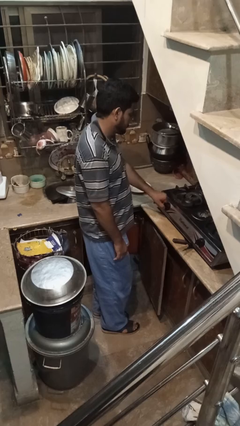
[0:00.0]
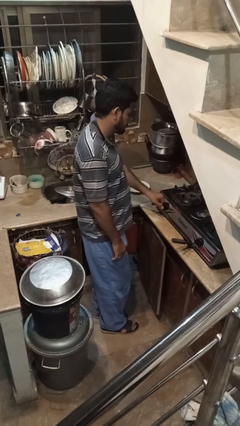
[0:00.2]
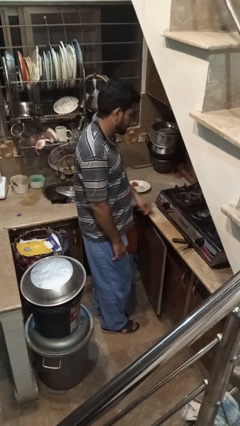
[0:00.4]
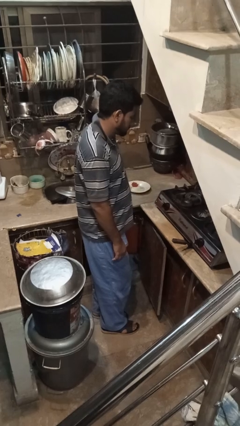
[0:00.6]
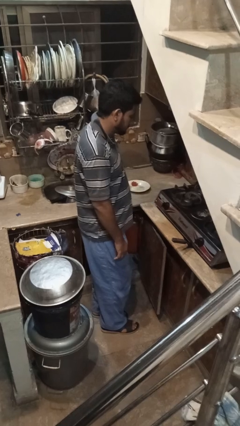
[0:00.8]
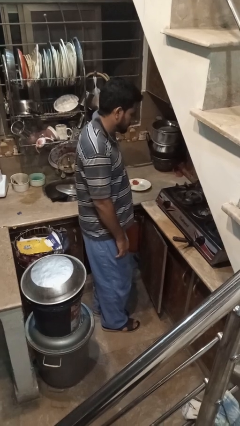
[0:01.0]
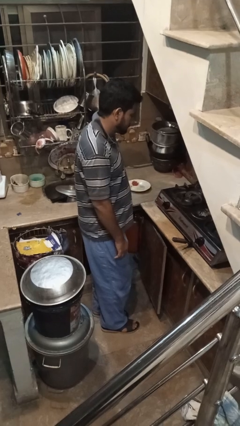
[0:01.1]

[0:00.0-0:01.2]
person turns off stovetop

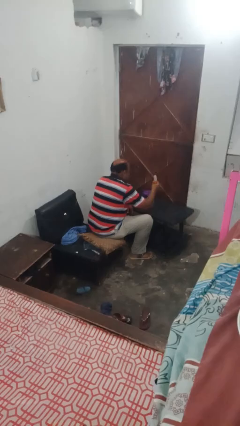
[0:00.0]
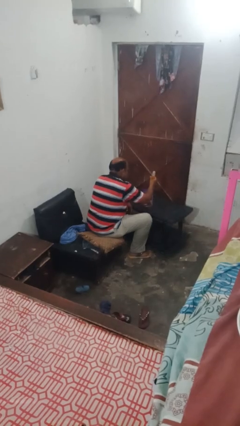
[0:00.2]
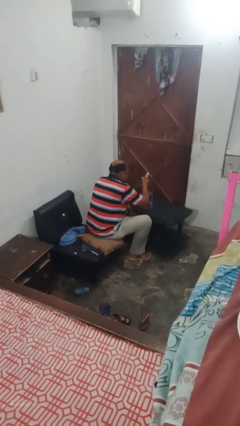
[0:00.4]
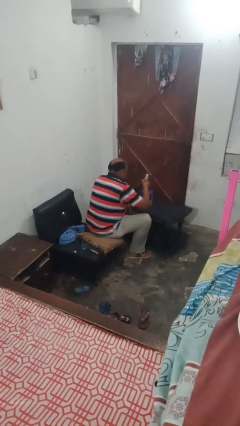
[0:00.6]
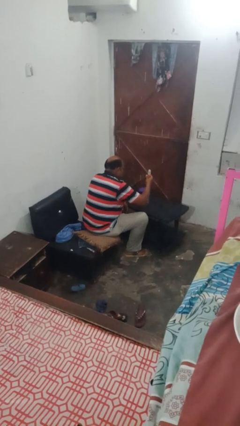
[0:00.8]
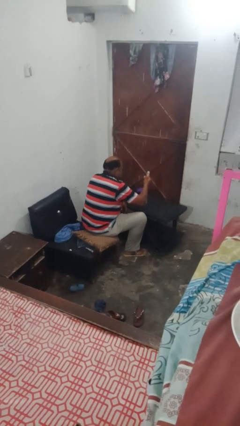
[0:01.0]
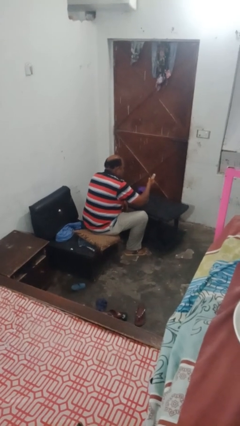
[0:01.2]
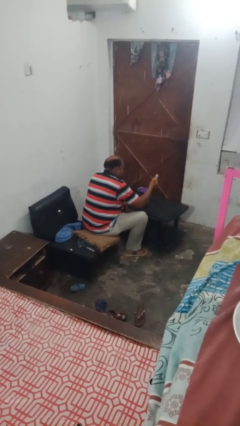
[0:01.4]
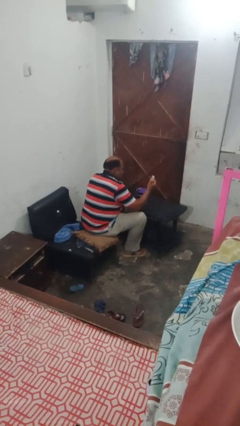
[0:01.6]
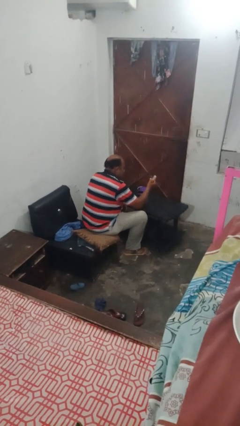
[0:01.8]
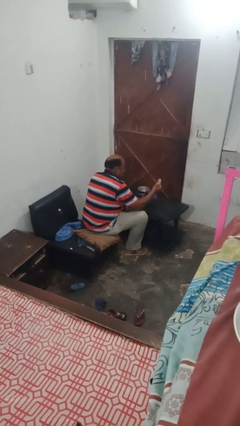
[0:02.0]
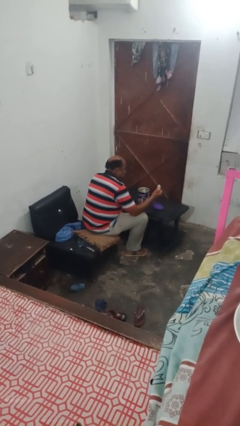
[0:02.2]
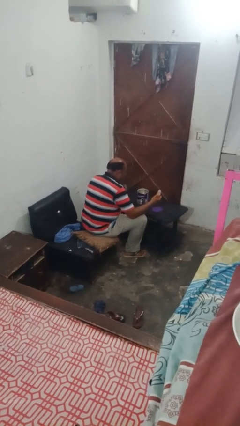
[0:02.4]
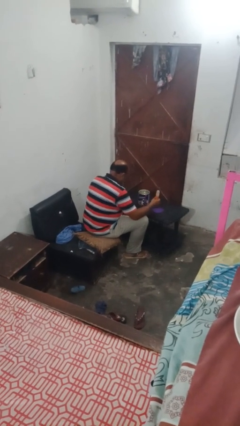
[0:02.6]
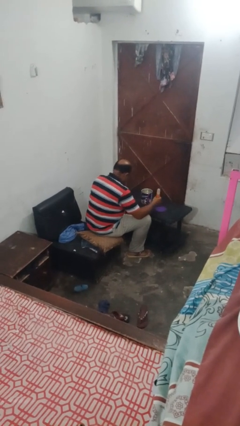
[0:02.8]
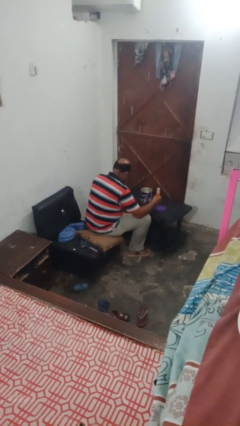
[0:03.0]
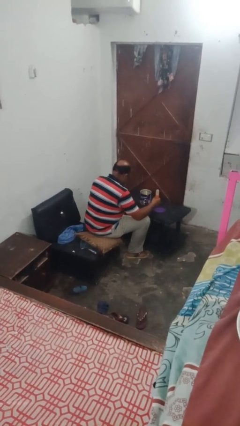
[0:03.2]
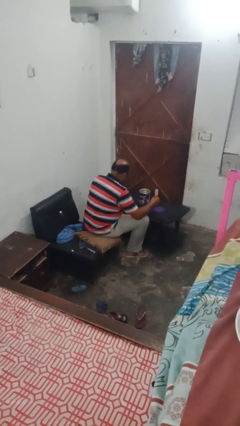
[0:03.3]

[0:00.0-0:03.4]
person opens can with can opener

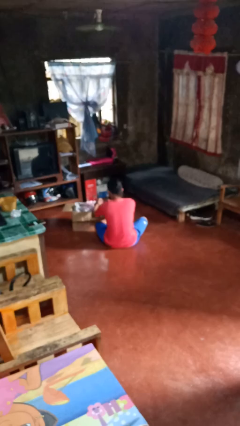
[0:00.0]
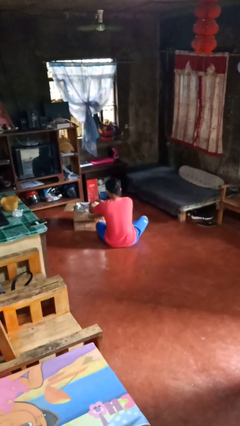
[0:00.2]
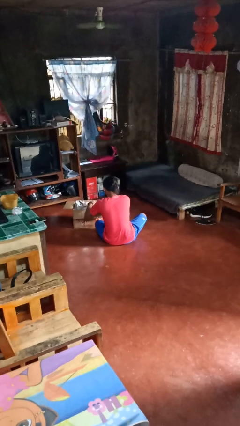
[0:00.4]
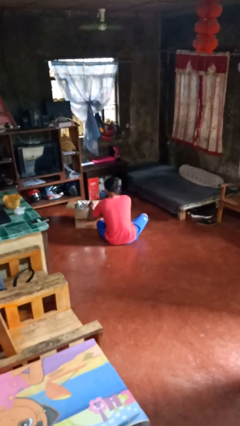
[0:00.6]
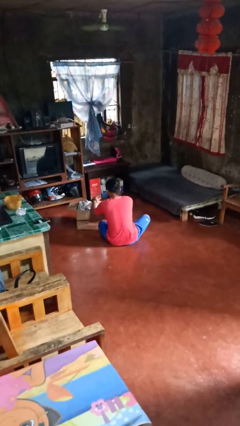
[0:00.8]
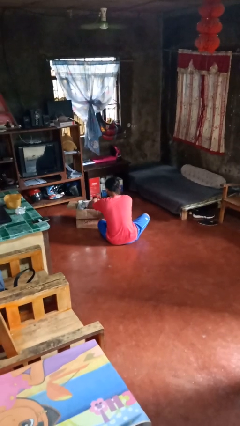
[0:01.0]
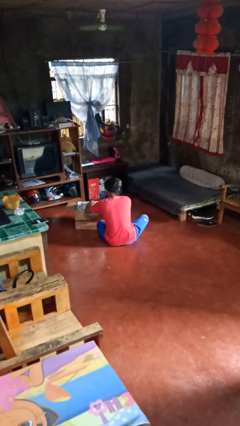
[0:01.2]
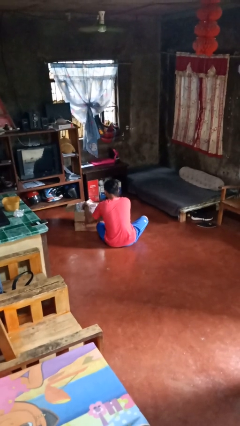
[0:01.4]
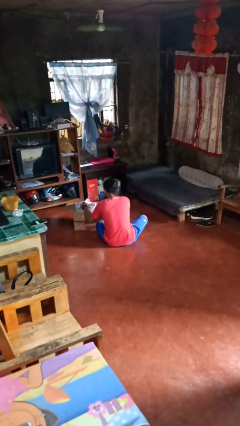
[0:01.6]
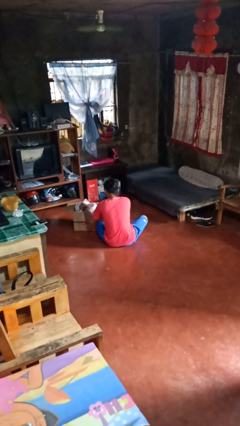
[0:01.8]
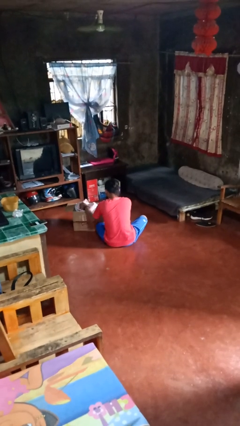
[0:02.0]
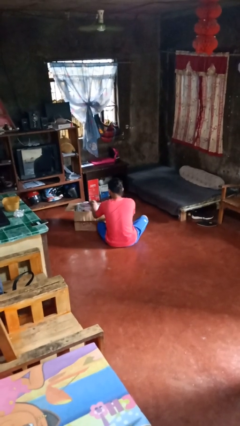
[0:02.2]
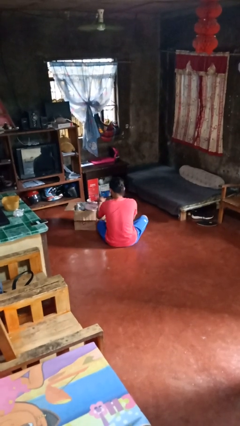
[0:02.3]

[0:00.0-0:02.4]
person searches in box

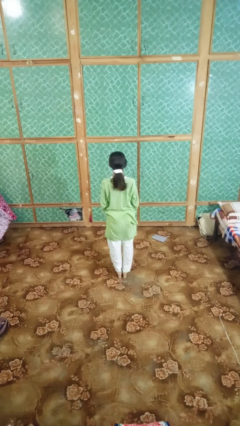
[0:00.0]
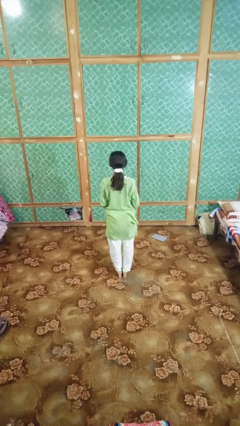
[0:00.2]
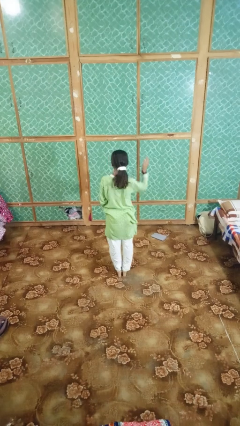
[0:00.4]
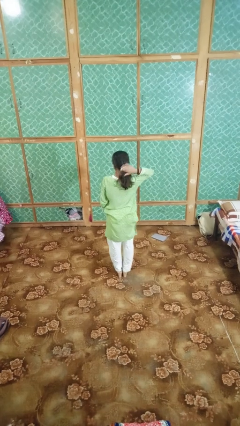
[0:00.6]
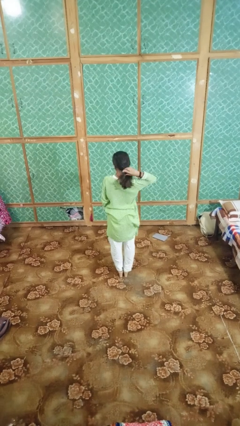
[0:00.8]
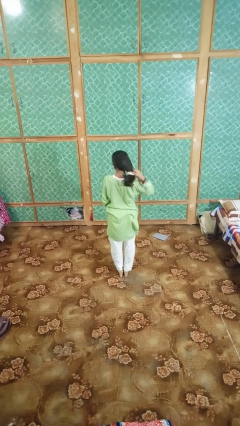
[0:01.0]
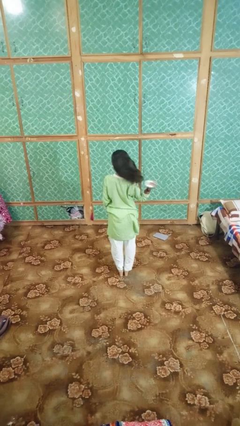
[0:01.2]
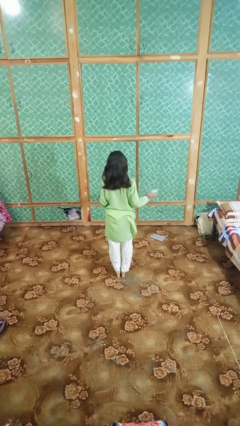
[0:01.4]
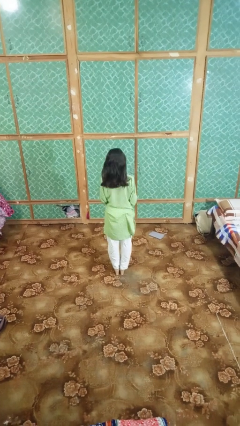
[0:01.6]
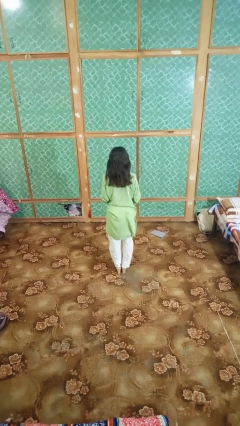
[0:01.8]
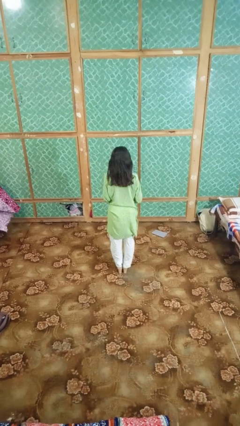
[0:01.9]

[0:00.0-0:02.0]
person takes off hairtie

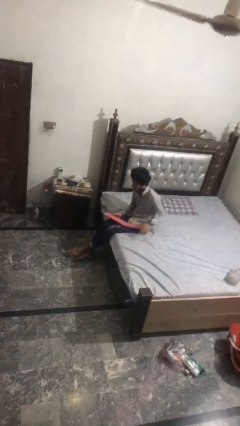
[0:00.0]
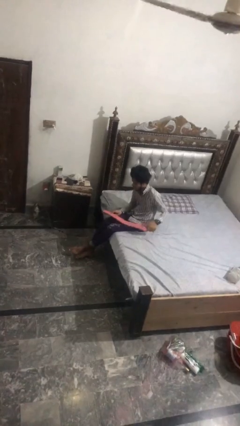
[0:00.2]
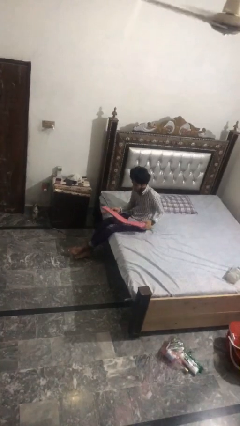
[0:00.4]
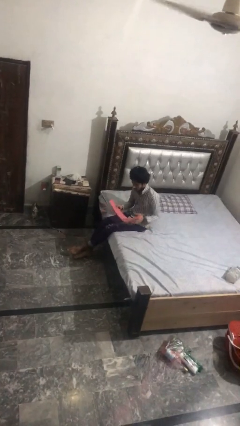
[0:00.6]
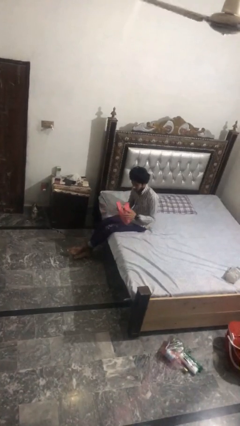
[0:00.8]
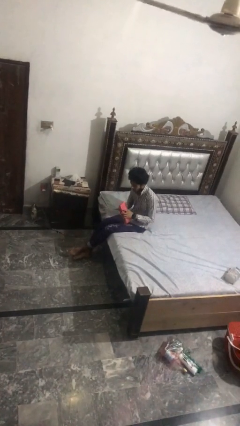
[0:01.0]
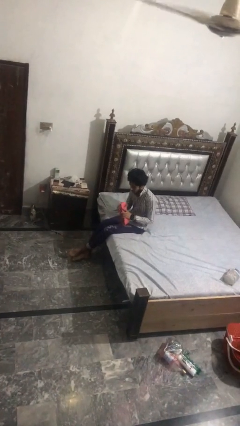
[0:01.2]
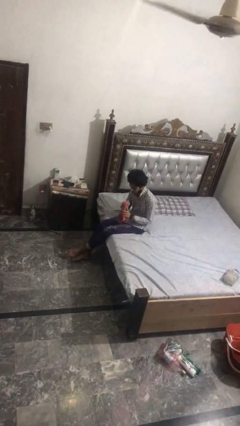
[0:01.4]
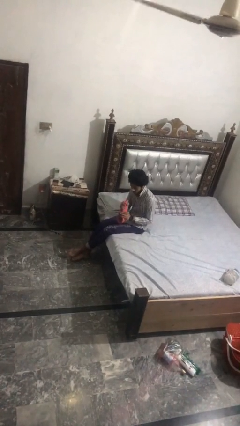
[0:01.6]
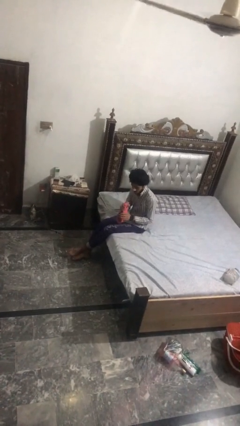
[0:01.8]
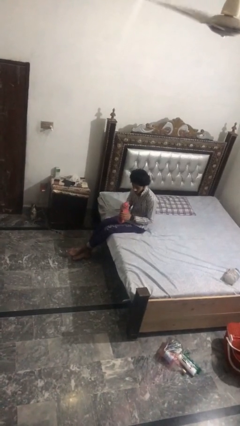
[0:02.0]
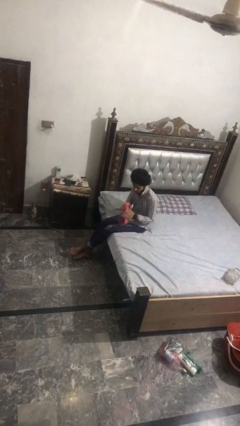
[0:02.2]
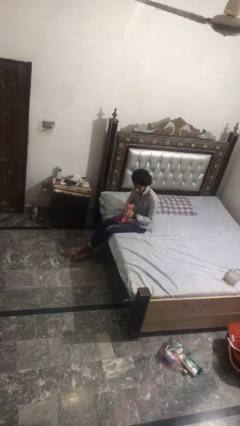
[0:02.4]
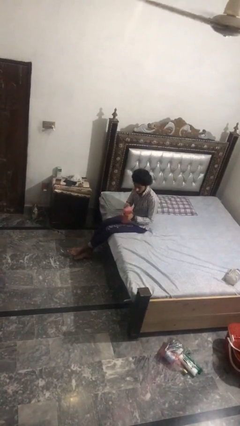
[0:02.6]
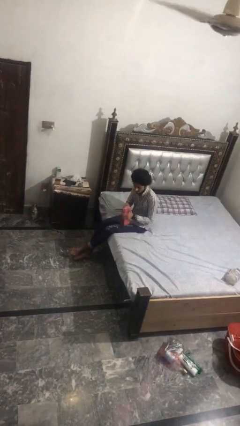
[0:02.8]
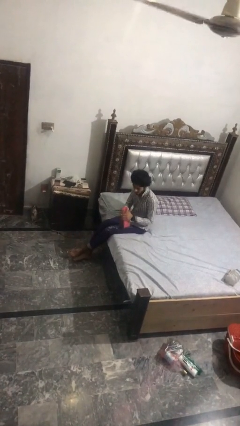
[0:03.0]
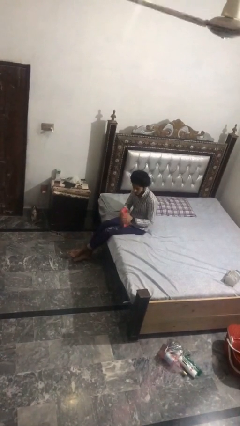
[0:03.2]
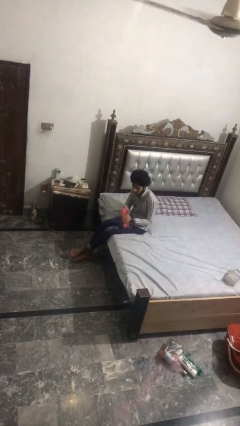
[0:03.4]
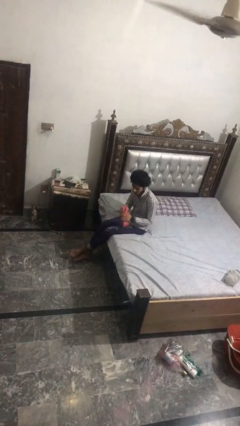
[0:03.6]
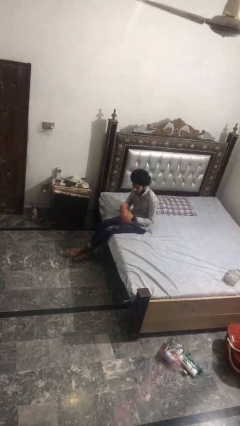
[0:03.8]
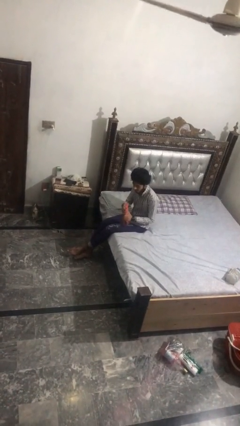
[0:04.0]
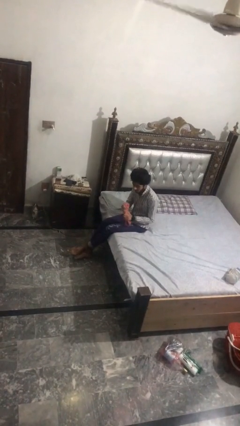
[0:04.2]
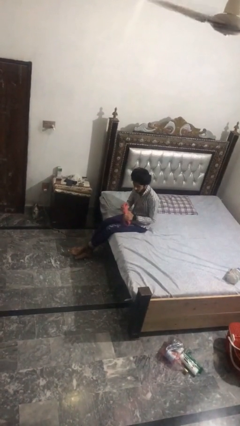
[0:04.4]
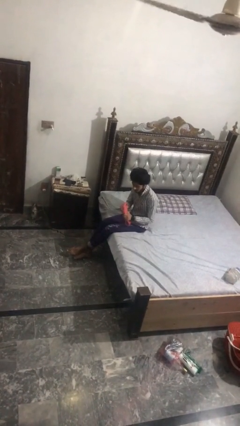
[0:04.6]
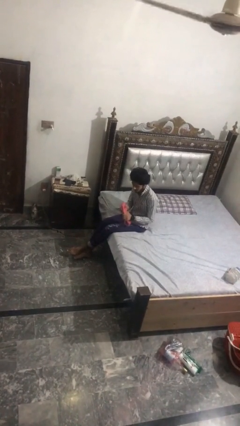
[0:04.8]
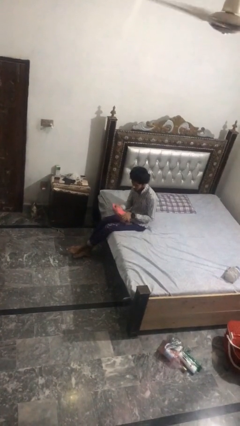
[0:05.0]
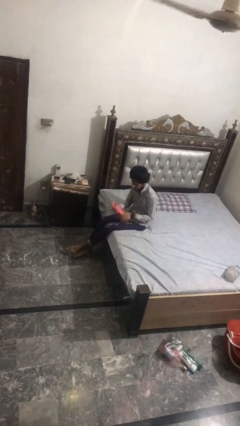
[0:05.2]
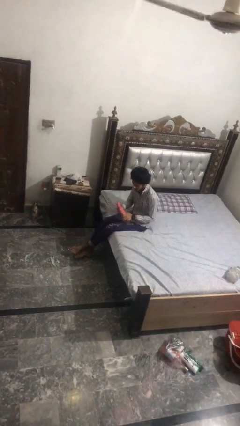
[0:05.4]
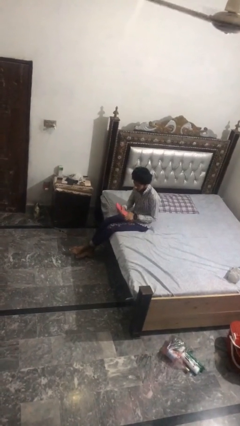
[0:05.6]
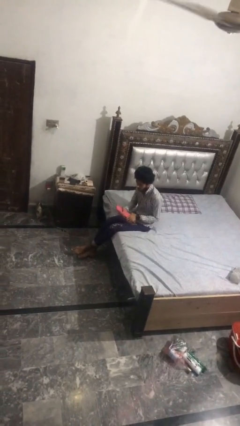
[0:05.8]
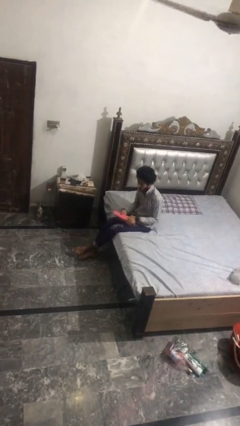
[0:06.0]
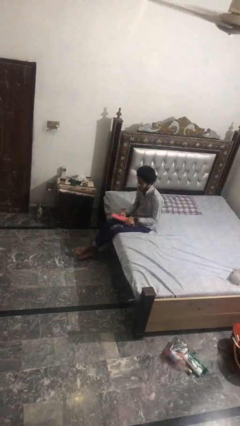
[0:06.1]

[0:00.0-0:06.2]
person squeezes object

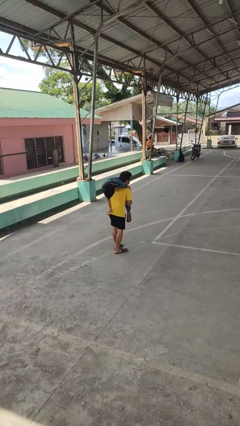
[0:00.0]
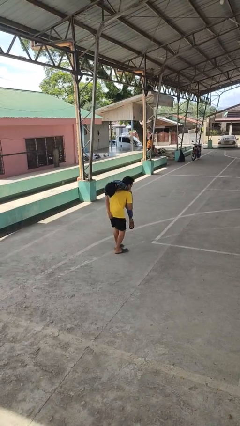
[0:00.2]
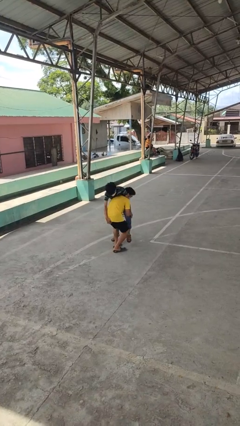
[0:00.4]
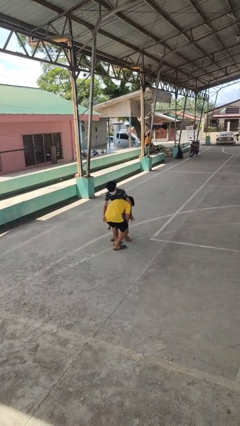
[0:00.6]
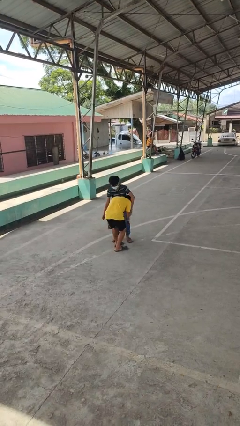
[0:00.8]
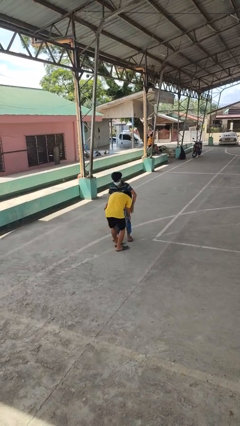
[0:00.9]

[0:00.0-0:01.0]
person puts down person

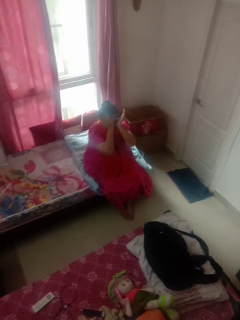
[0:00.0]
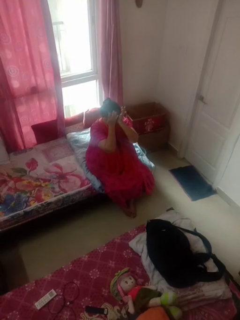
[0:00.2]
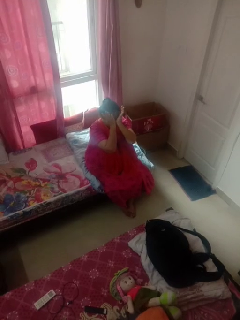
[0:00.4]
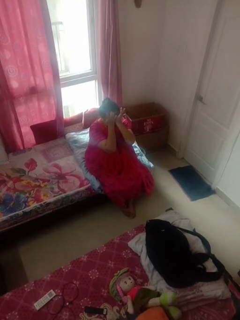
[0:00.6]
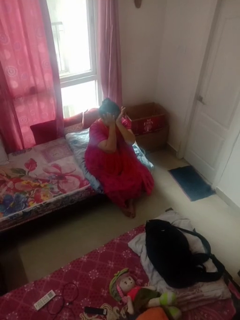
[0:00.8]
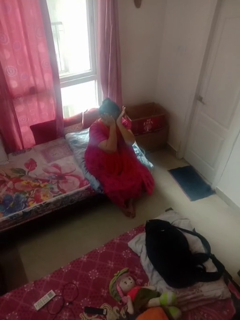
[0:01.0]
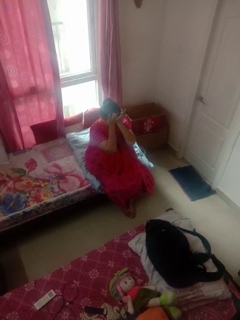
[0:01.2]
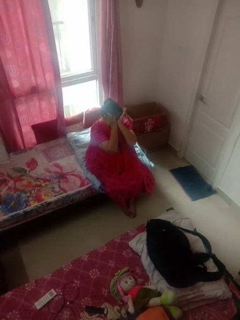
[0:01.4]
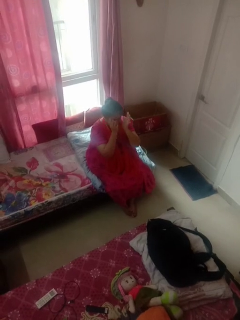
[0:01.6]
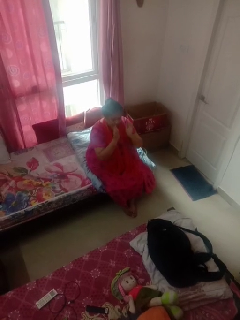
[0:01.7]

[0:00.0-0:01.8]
person rubs eyes
